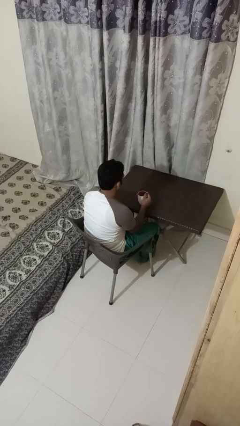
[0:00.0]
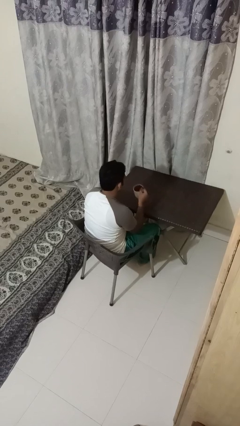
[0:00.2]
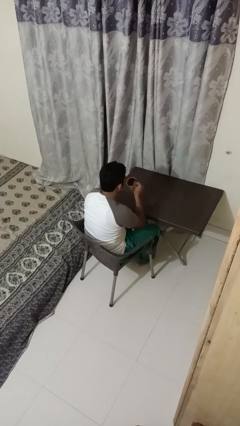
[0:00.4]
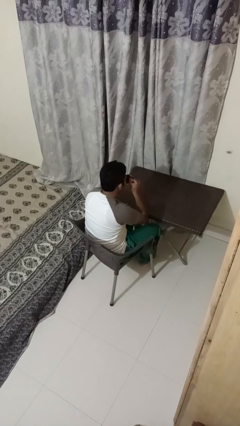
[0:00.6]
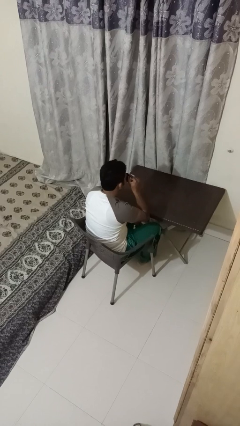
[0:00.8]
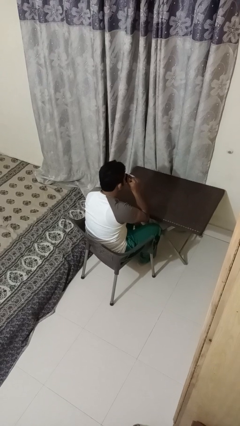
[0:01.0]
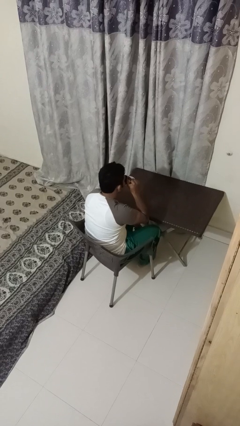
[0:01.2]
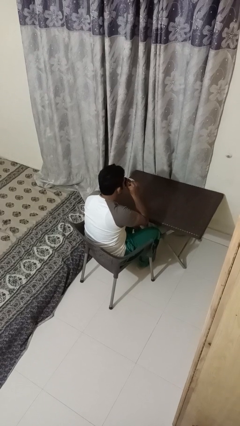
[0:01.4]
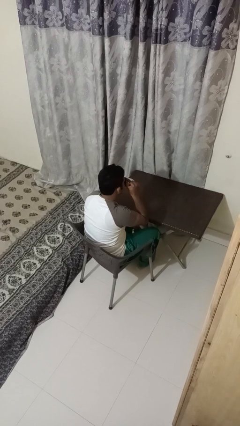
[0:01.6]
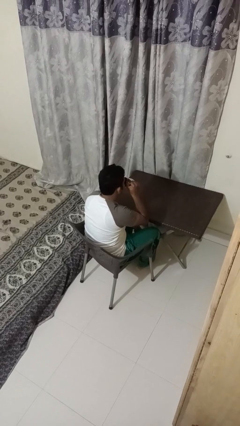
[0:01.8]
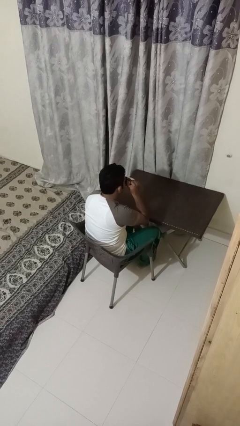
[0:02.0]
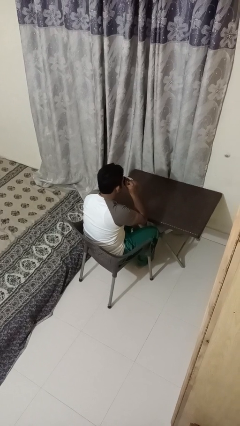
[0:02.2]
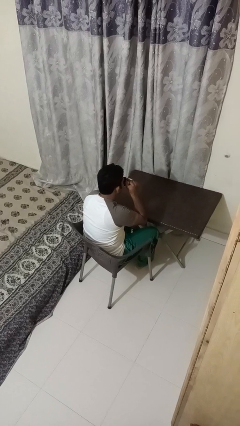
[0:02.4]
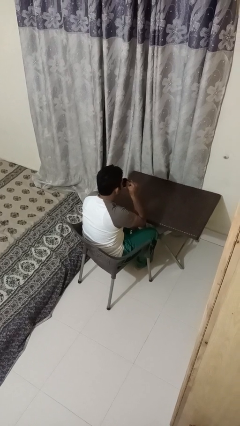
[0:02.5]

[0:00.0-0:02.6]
person drinks from mug

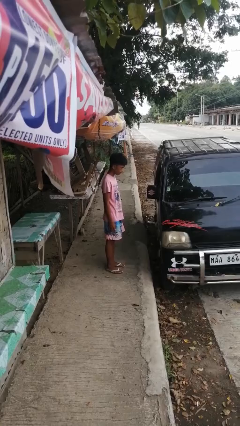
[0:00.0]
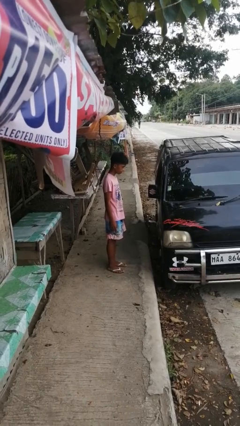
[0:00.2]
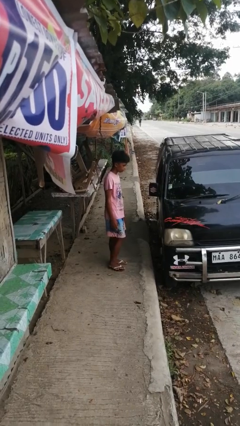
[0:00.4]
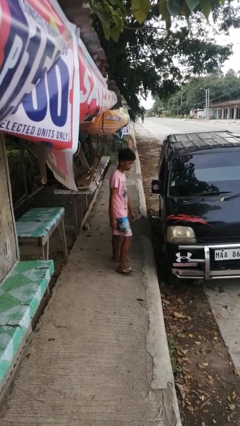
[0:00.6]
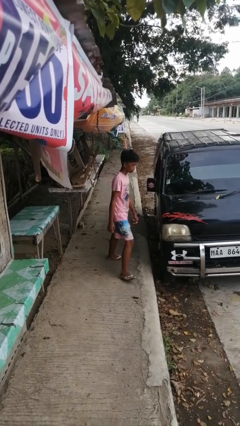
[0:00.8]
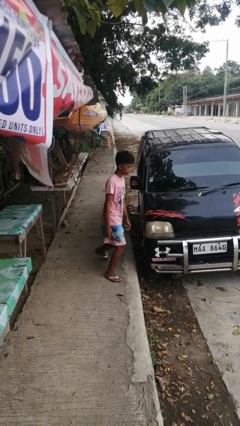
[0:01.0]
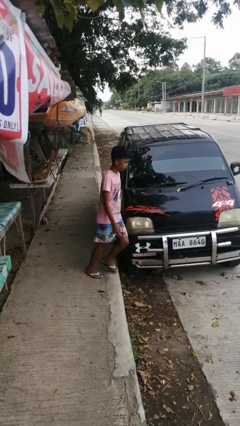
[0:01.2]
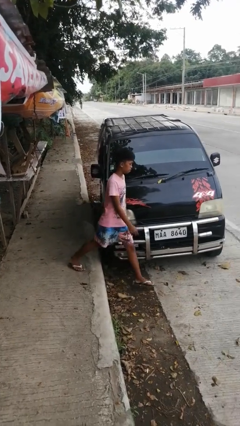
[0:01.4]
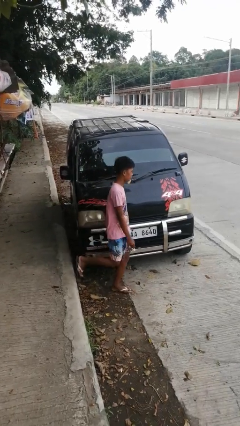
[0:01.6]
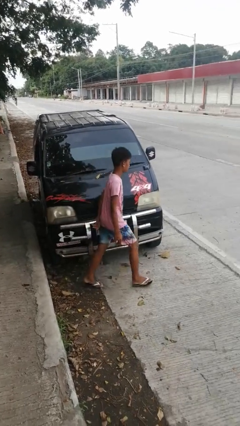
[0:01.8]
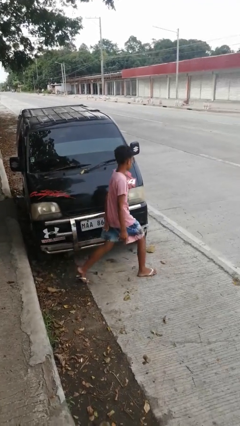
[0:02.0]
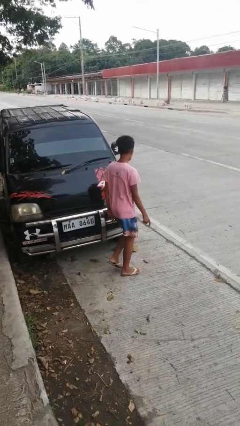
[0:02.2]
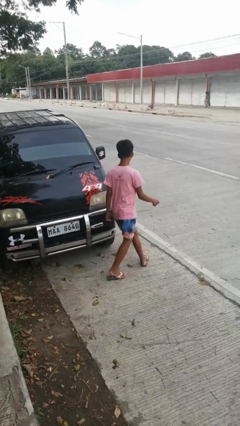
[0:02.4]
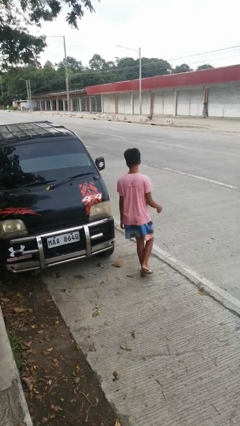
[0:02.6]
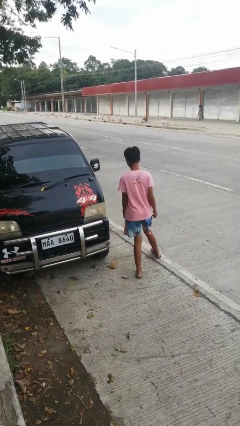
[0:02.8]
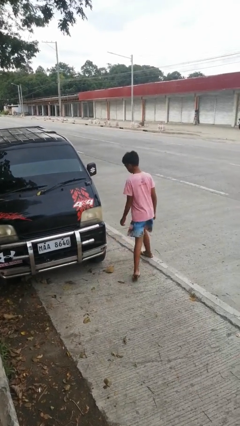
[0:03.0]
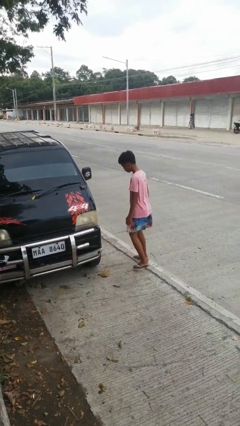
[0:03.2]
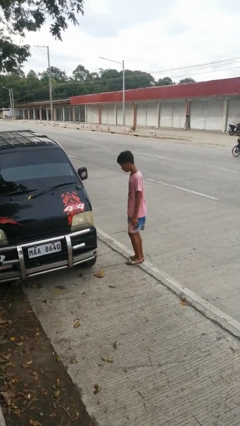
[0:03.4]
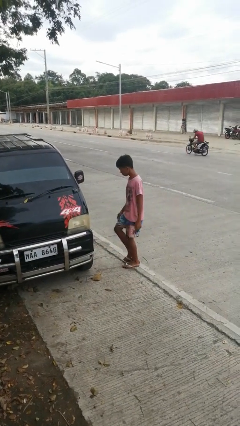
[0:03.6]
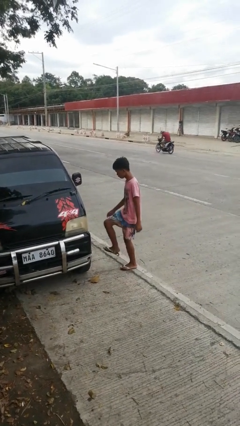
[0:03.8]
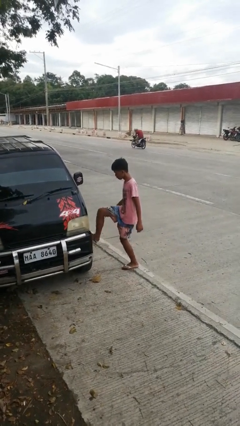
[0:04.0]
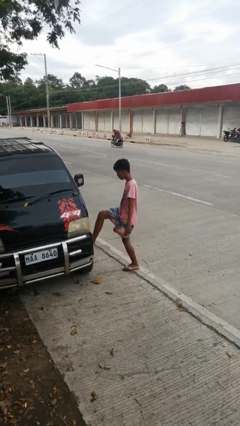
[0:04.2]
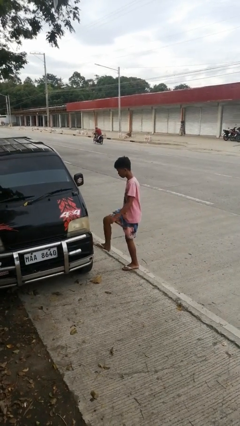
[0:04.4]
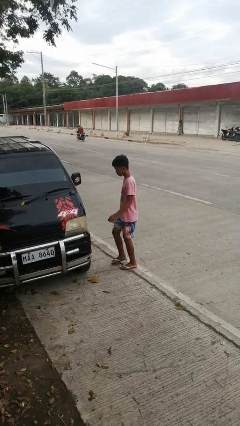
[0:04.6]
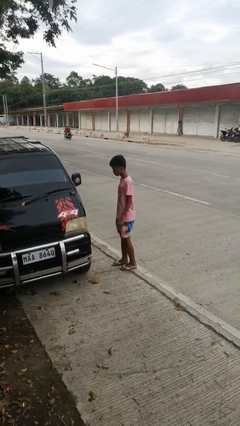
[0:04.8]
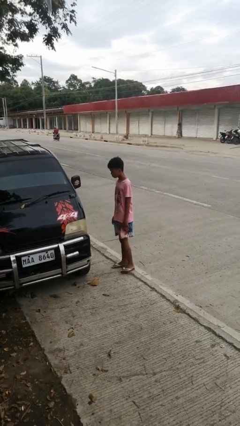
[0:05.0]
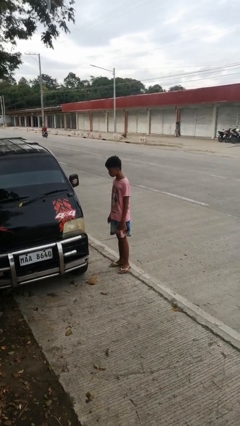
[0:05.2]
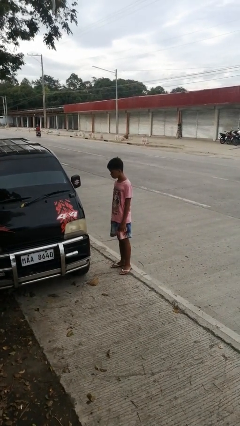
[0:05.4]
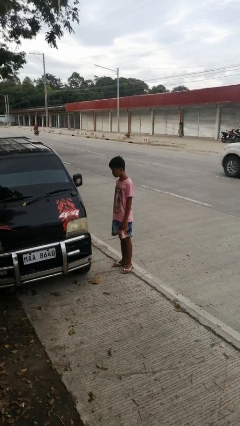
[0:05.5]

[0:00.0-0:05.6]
person kicks car tires

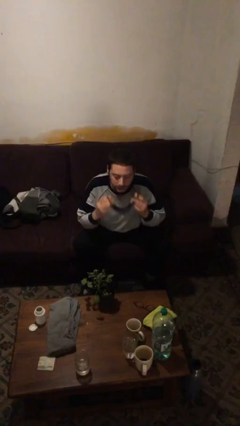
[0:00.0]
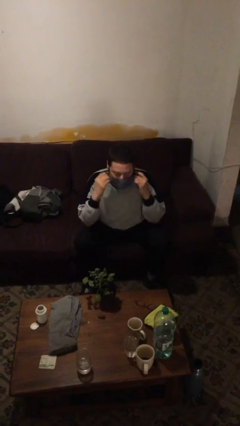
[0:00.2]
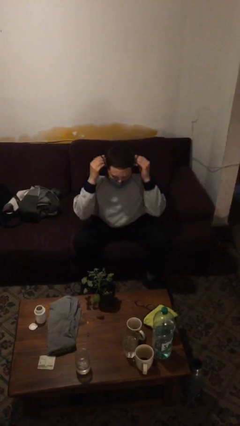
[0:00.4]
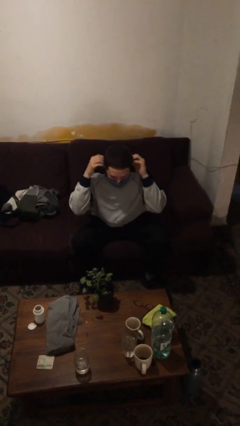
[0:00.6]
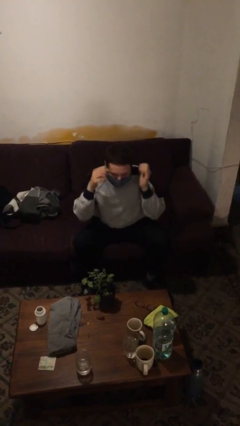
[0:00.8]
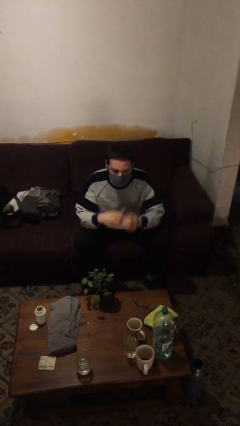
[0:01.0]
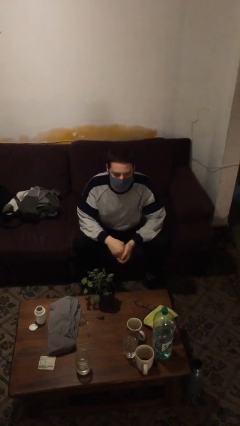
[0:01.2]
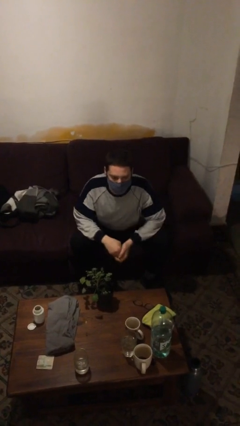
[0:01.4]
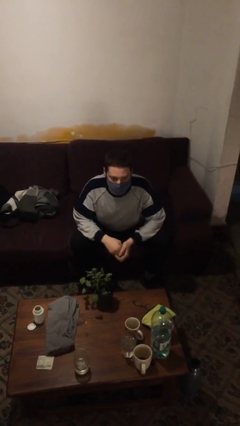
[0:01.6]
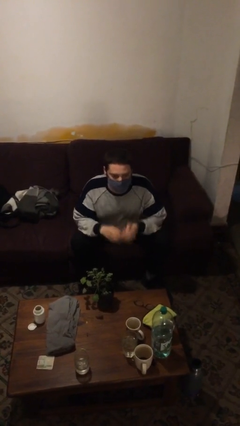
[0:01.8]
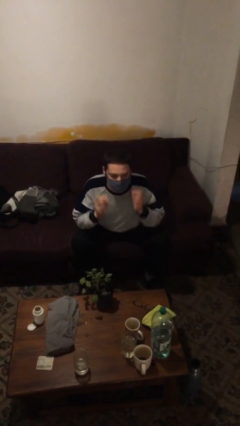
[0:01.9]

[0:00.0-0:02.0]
person puts on facemask

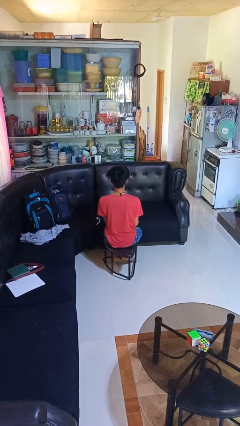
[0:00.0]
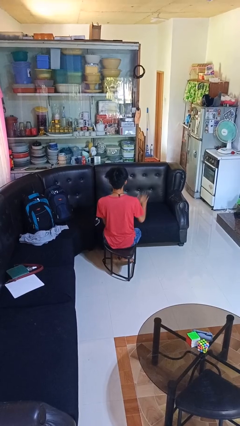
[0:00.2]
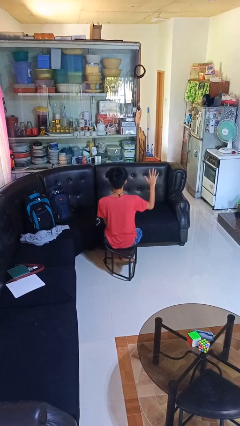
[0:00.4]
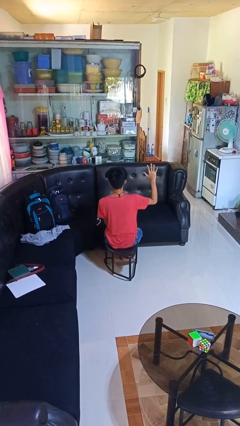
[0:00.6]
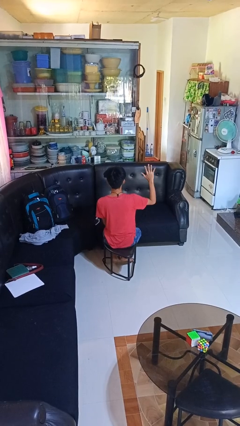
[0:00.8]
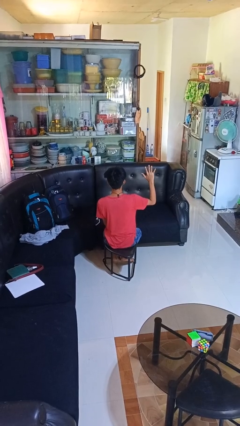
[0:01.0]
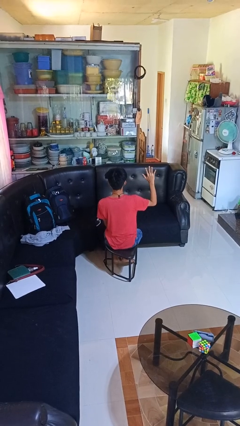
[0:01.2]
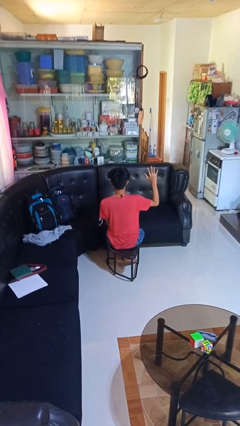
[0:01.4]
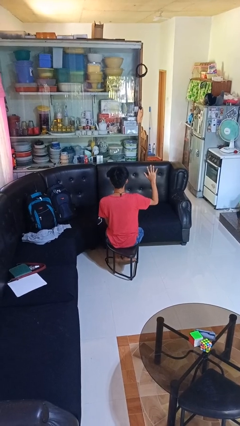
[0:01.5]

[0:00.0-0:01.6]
person gestures number five

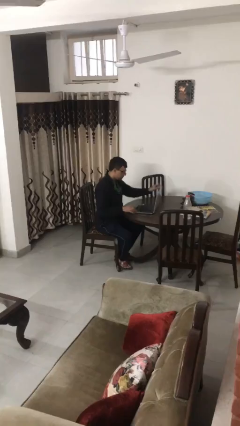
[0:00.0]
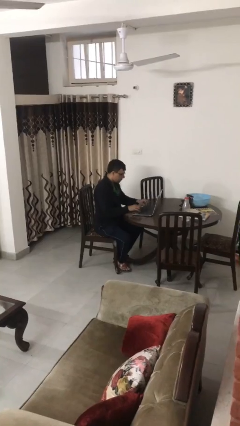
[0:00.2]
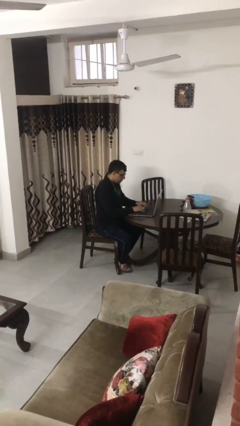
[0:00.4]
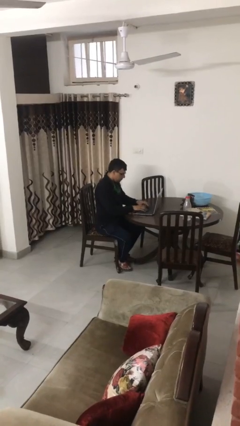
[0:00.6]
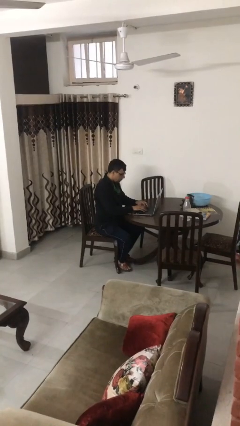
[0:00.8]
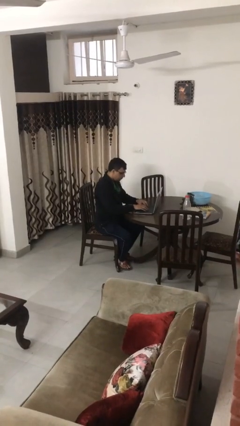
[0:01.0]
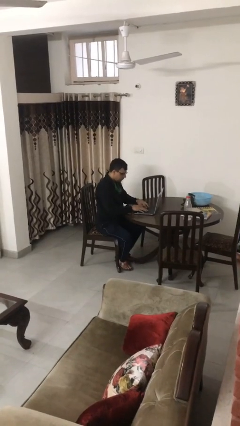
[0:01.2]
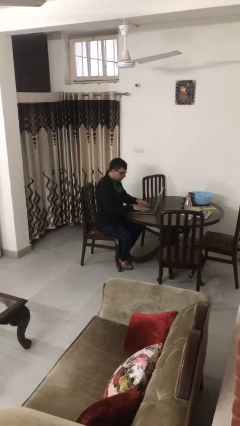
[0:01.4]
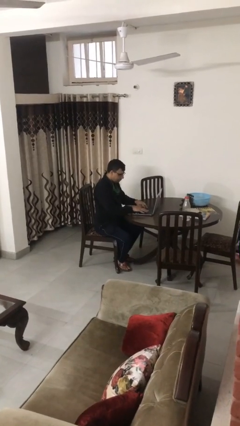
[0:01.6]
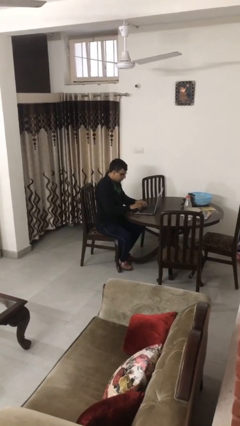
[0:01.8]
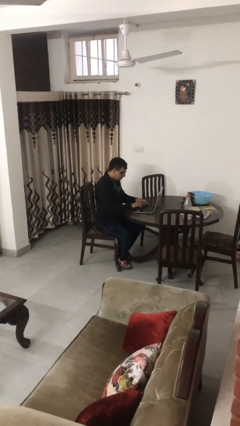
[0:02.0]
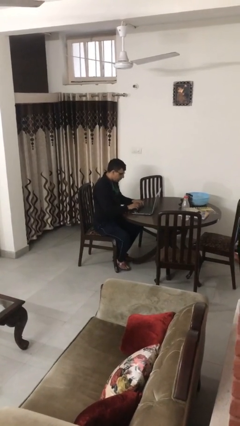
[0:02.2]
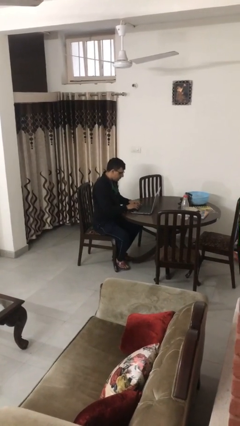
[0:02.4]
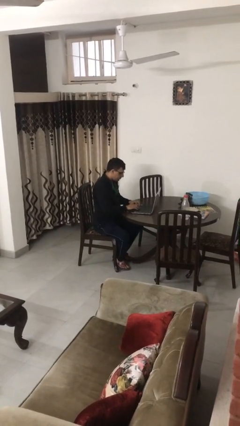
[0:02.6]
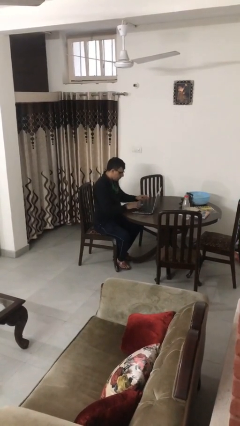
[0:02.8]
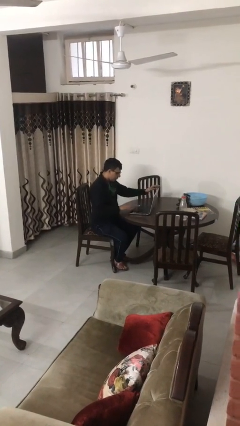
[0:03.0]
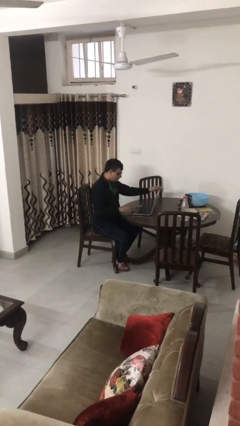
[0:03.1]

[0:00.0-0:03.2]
person interacts with laptop

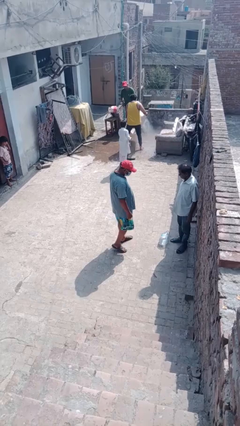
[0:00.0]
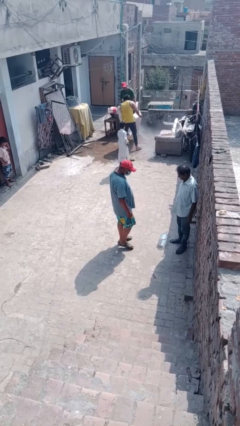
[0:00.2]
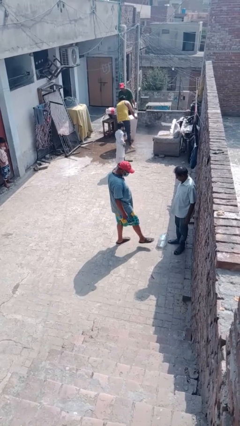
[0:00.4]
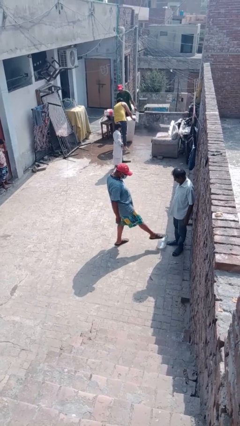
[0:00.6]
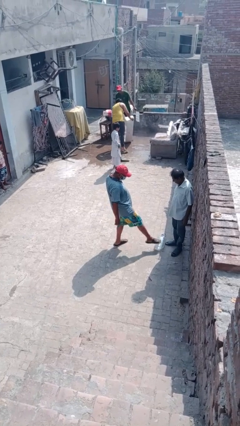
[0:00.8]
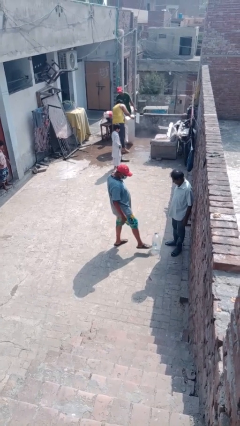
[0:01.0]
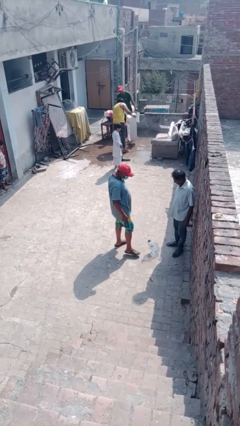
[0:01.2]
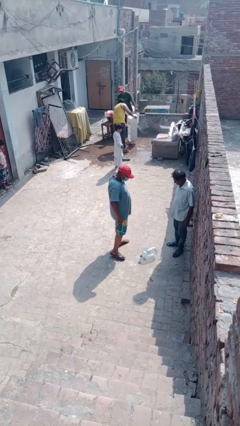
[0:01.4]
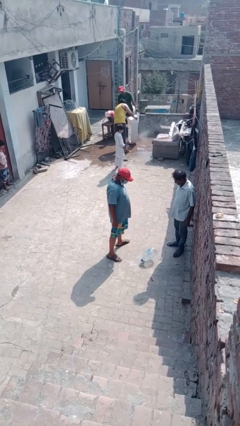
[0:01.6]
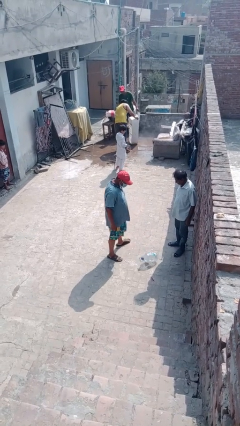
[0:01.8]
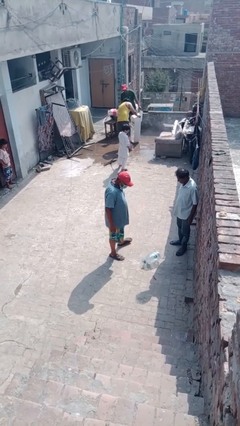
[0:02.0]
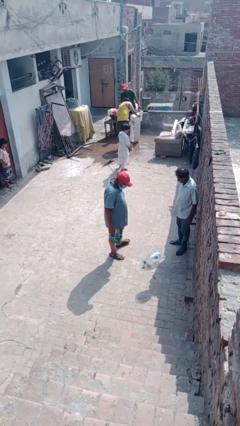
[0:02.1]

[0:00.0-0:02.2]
person kicks object to person
